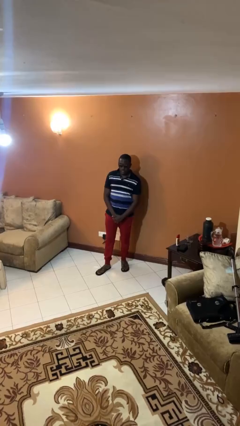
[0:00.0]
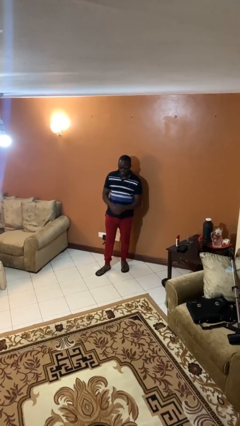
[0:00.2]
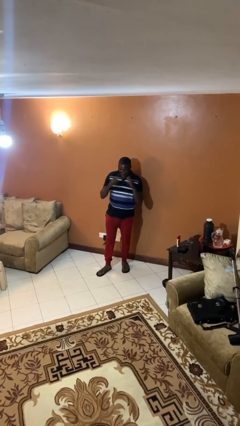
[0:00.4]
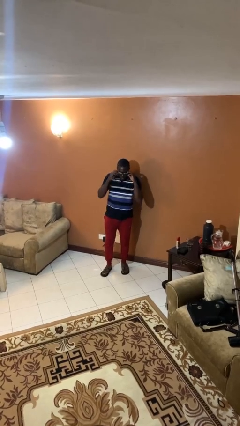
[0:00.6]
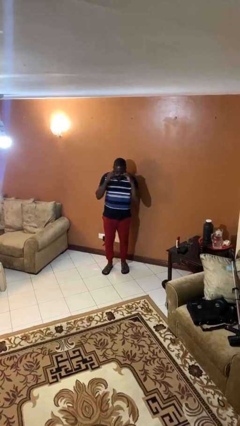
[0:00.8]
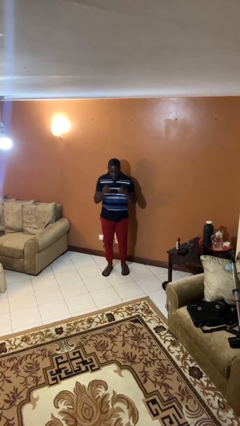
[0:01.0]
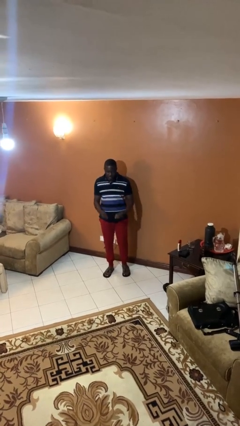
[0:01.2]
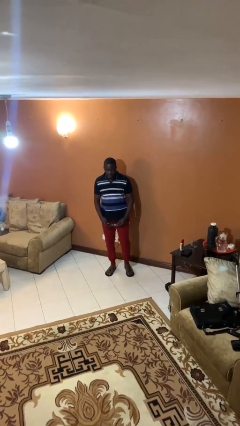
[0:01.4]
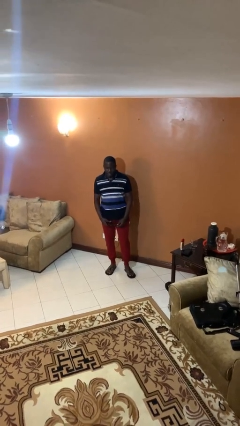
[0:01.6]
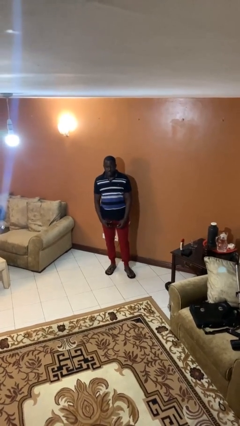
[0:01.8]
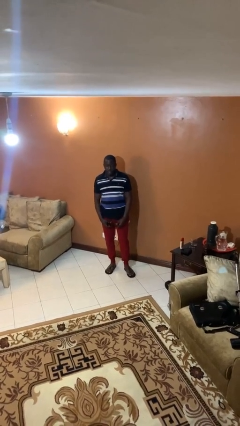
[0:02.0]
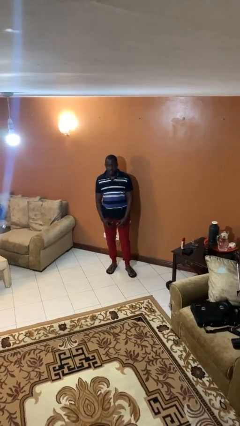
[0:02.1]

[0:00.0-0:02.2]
person takes off sunglasses

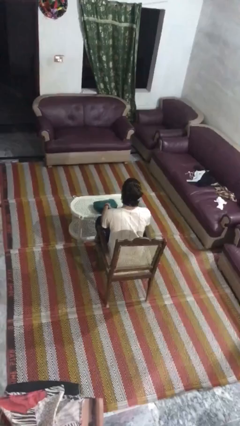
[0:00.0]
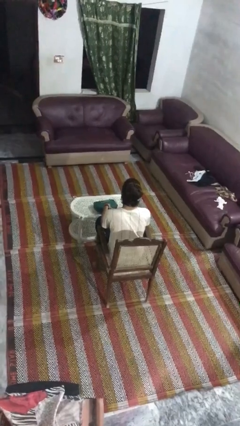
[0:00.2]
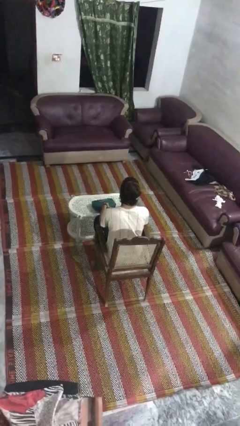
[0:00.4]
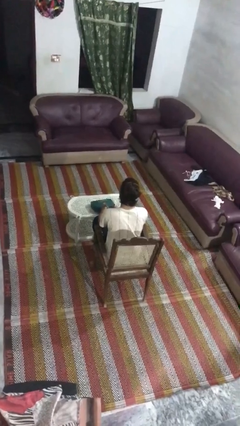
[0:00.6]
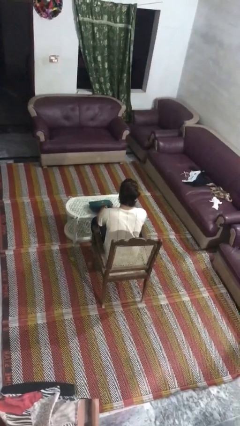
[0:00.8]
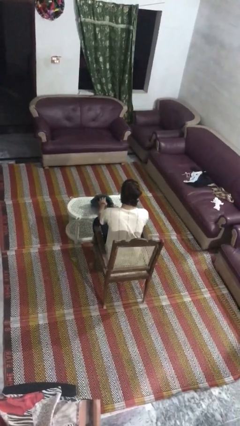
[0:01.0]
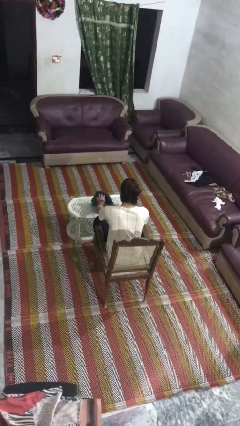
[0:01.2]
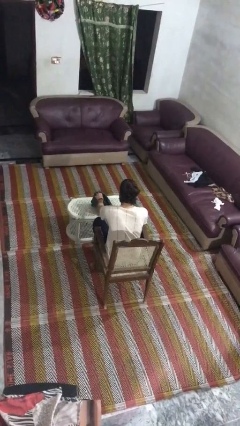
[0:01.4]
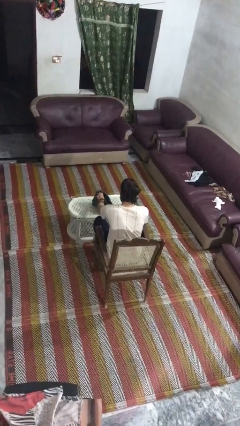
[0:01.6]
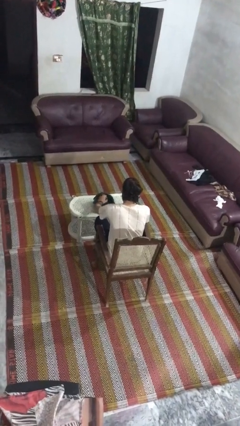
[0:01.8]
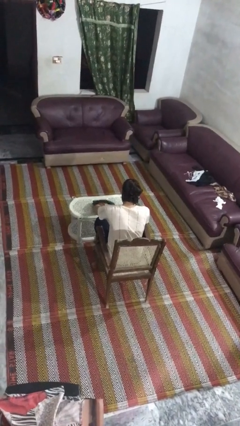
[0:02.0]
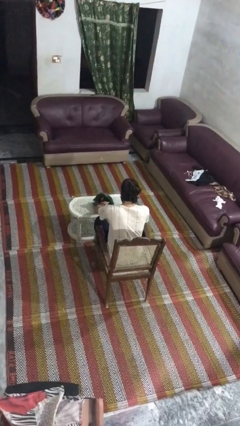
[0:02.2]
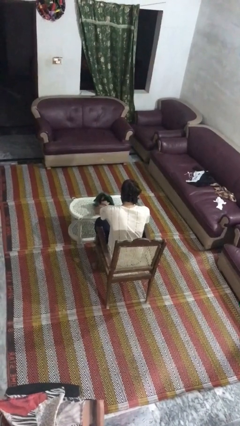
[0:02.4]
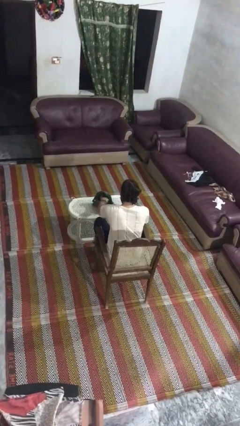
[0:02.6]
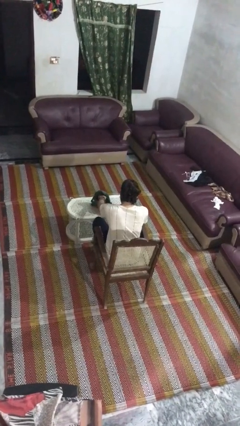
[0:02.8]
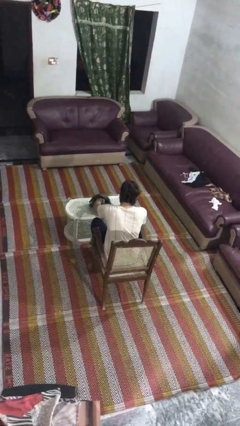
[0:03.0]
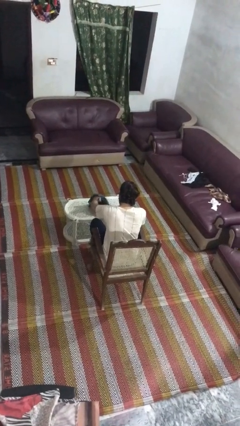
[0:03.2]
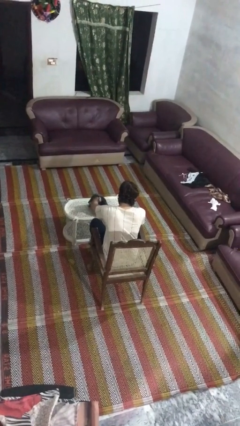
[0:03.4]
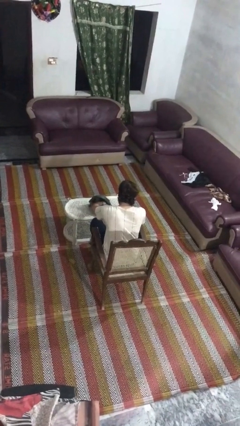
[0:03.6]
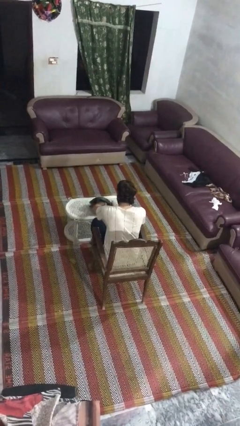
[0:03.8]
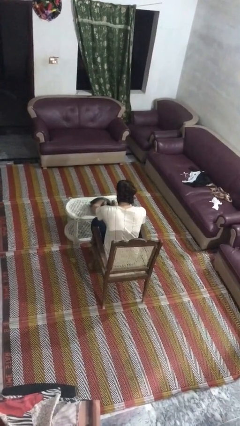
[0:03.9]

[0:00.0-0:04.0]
person searches in purse

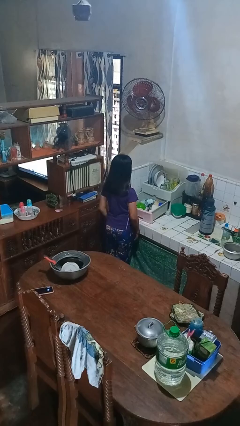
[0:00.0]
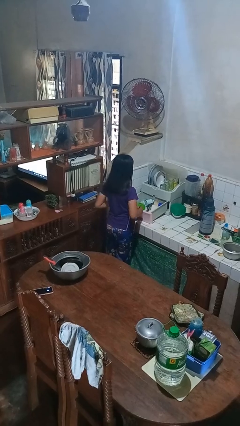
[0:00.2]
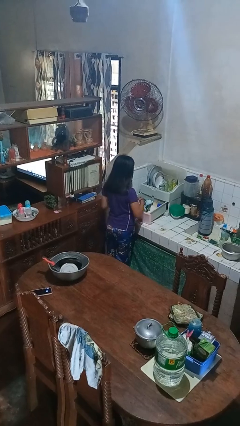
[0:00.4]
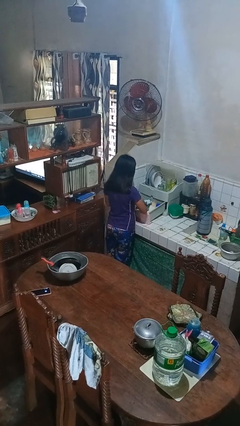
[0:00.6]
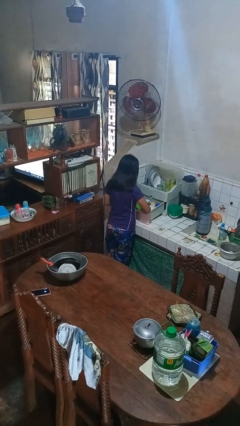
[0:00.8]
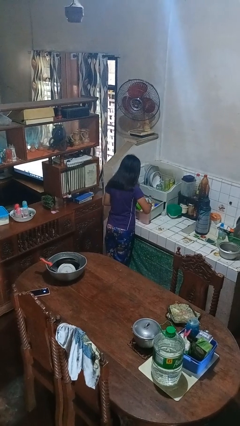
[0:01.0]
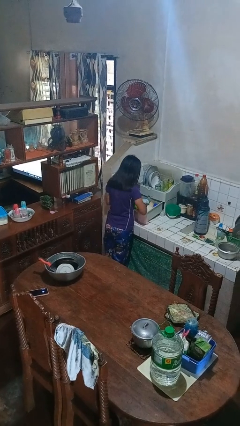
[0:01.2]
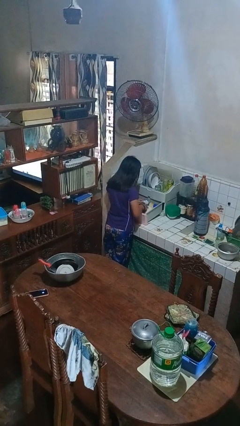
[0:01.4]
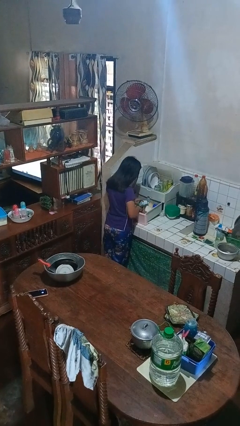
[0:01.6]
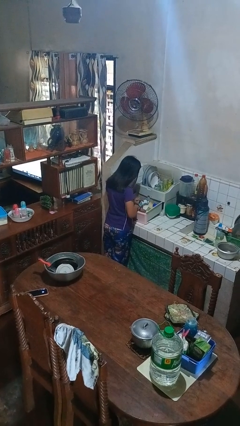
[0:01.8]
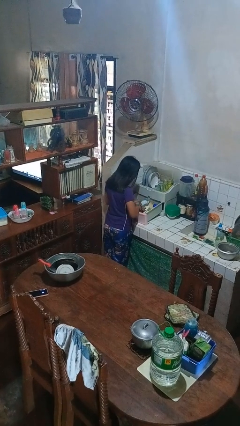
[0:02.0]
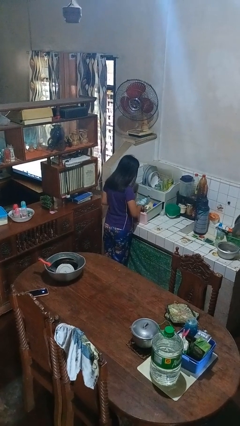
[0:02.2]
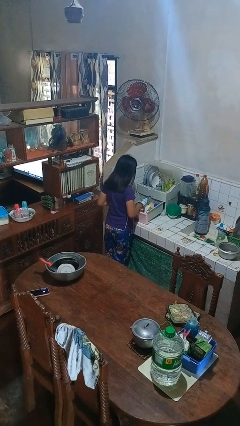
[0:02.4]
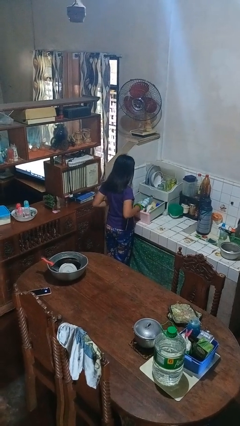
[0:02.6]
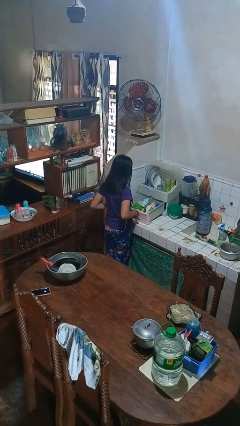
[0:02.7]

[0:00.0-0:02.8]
person searches in kitchen drawer

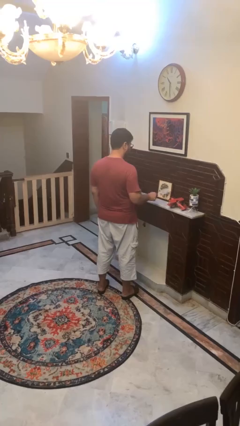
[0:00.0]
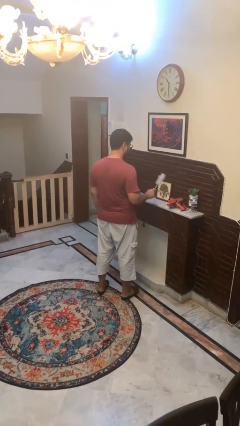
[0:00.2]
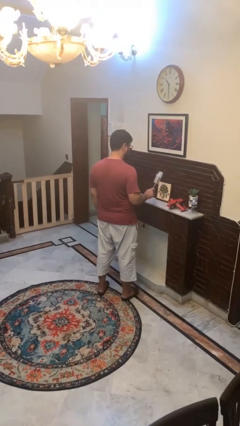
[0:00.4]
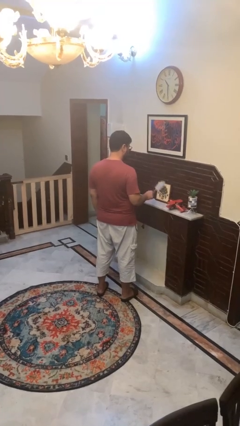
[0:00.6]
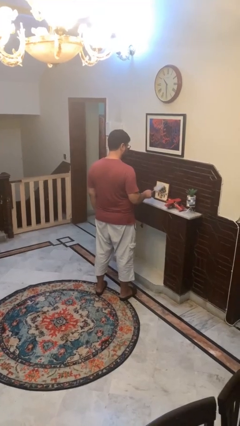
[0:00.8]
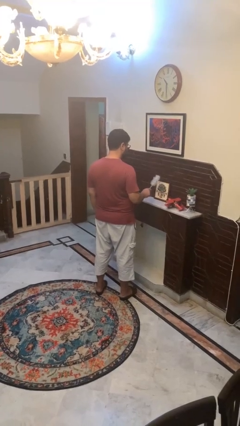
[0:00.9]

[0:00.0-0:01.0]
person dusts furniture

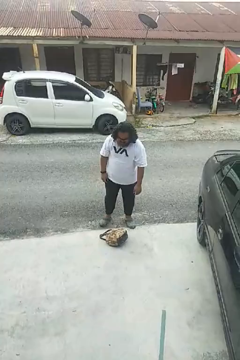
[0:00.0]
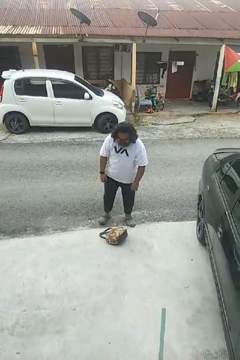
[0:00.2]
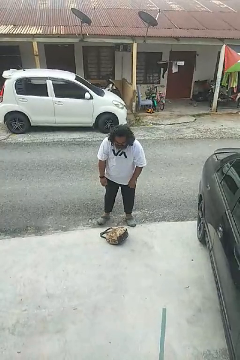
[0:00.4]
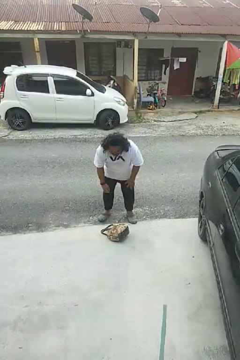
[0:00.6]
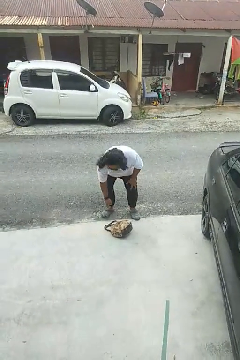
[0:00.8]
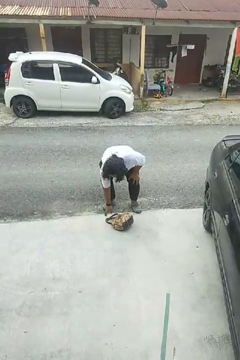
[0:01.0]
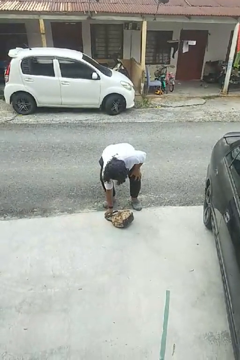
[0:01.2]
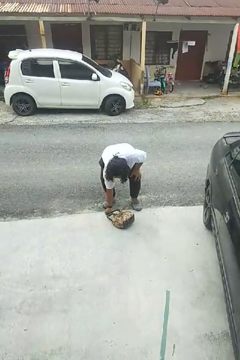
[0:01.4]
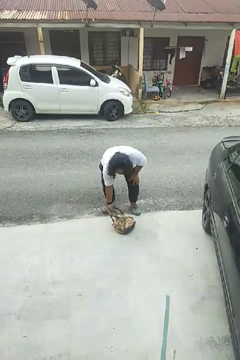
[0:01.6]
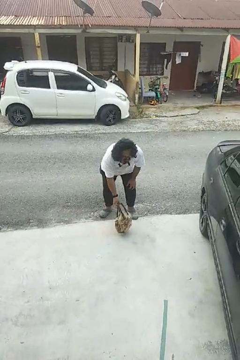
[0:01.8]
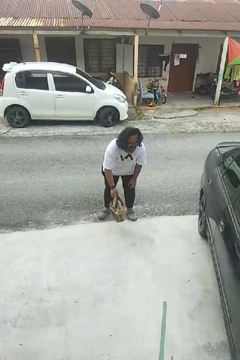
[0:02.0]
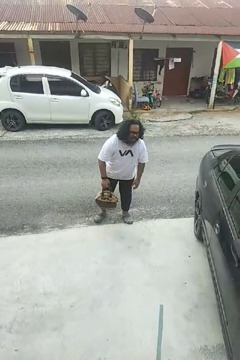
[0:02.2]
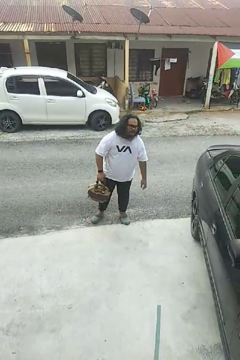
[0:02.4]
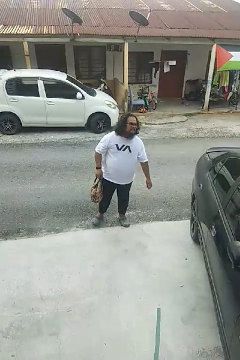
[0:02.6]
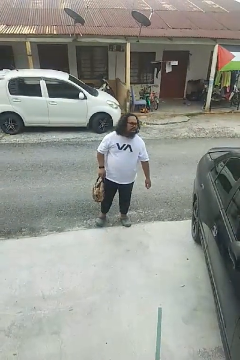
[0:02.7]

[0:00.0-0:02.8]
person picks up object from floor

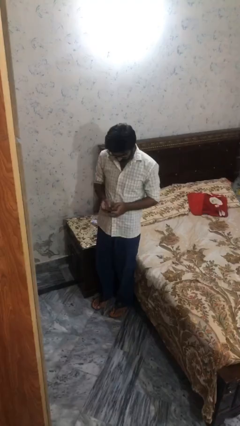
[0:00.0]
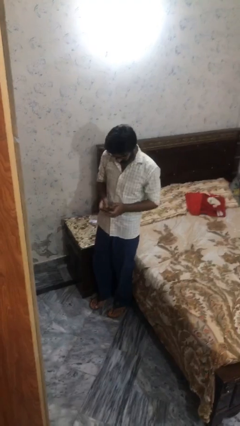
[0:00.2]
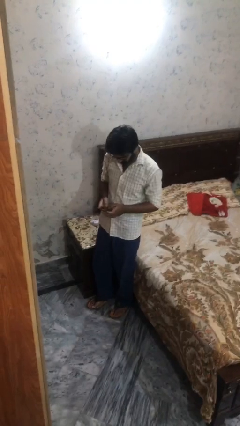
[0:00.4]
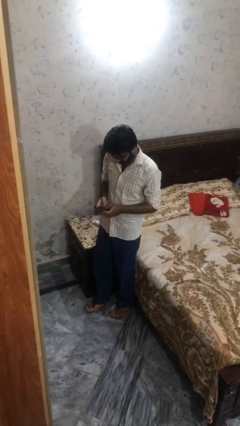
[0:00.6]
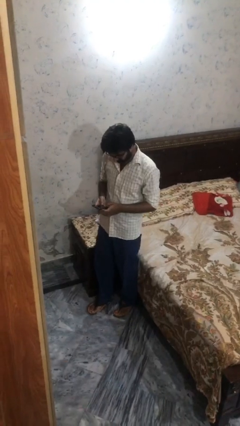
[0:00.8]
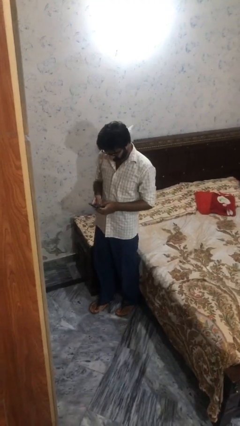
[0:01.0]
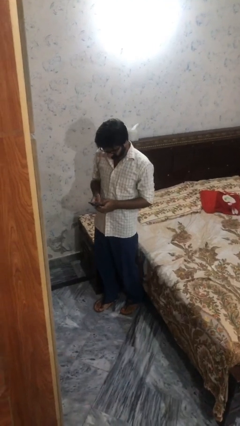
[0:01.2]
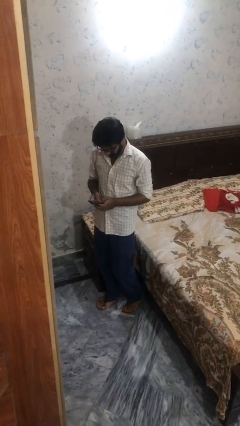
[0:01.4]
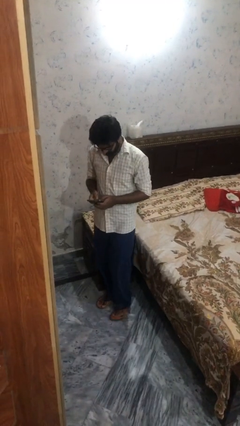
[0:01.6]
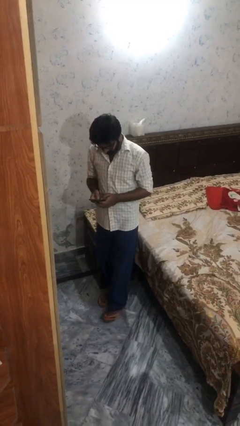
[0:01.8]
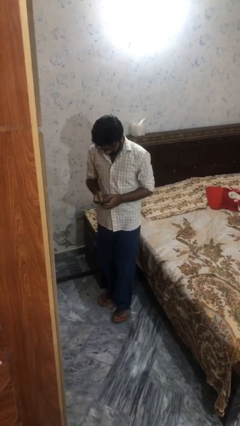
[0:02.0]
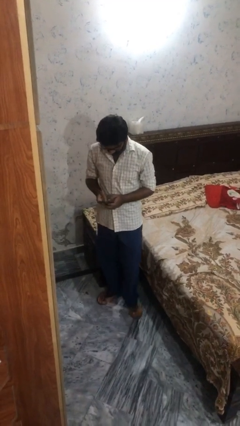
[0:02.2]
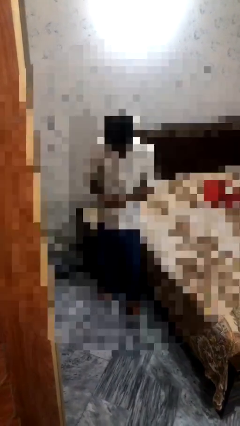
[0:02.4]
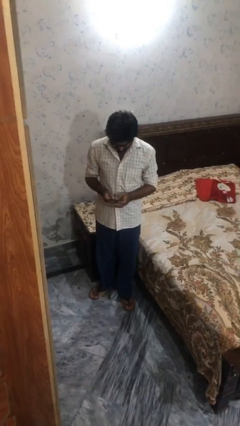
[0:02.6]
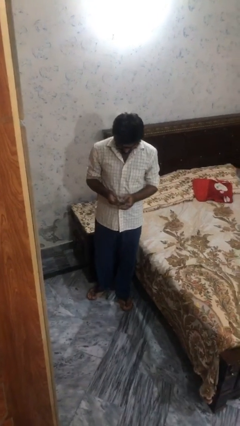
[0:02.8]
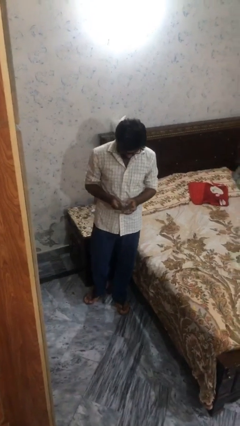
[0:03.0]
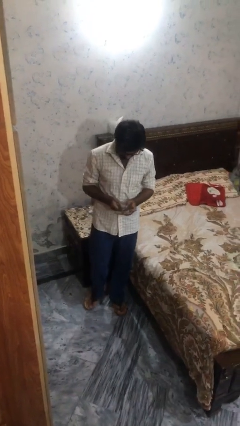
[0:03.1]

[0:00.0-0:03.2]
person texts on phone

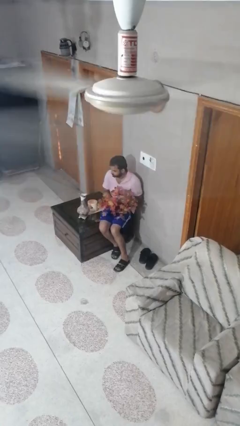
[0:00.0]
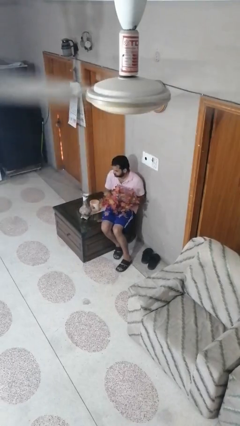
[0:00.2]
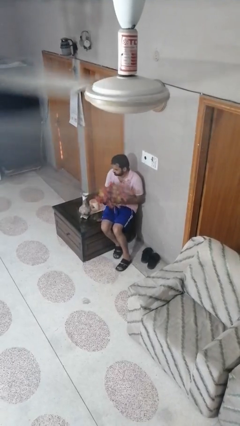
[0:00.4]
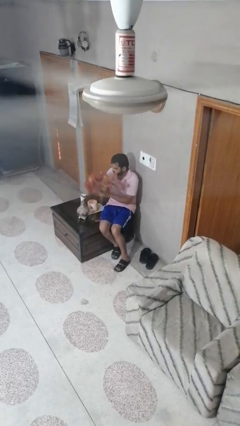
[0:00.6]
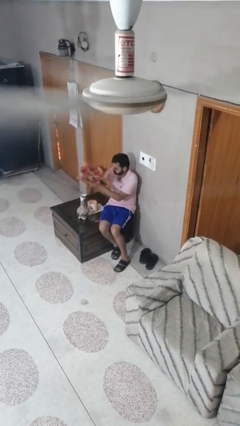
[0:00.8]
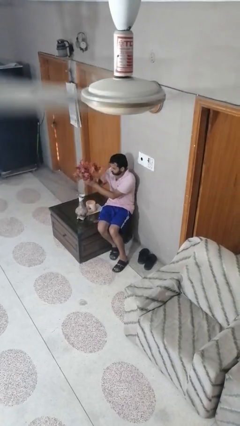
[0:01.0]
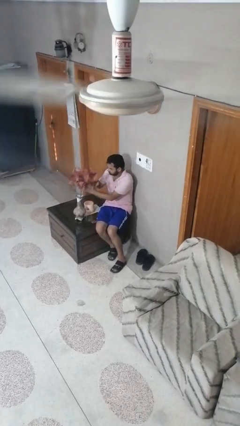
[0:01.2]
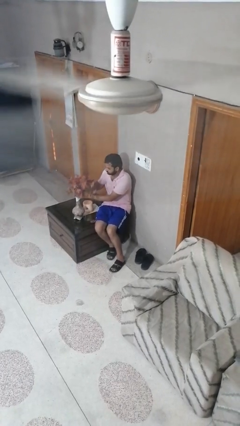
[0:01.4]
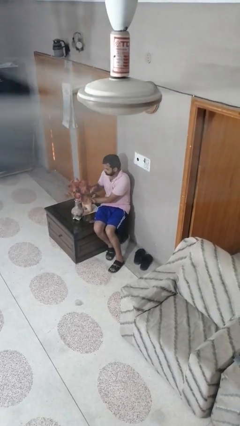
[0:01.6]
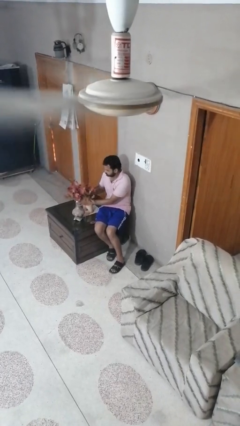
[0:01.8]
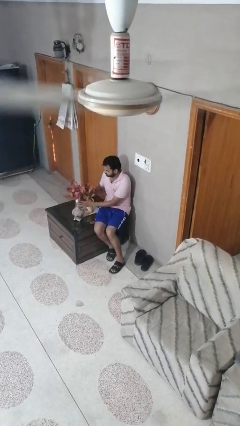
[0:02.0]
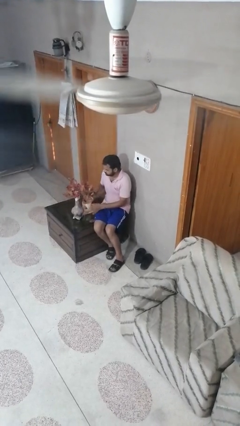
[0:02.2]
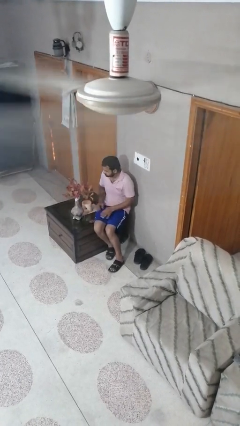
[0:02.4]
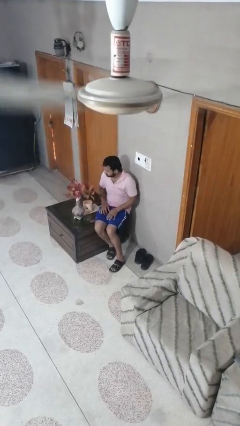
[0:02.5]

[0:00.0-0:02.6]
person arranges flowers in vase
